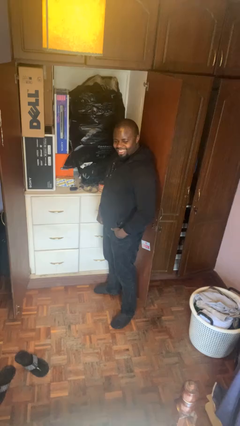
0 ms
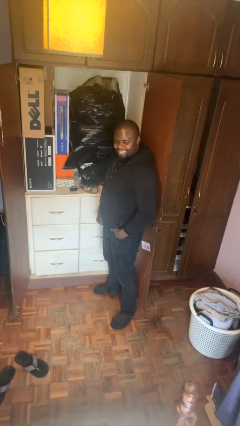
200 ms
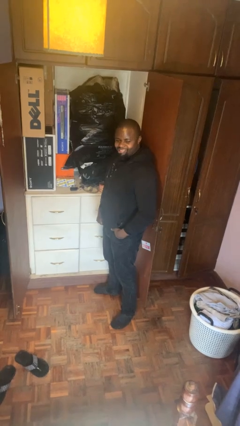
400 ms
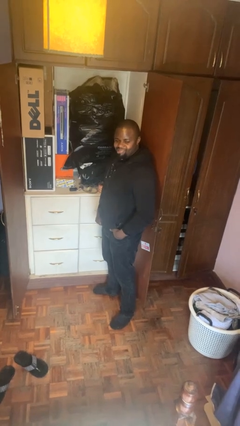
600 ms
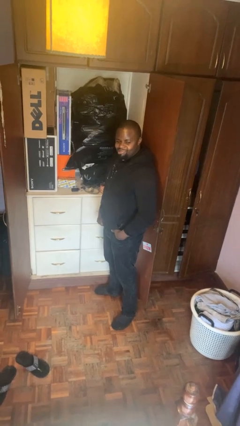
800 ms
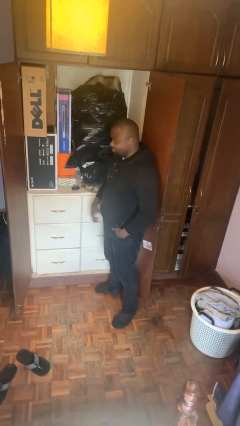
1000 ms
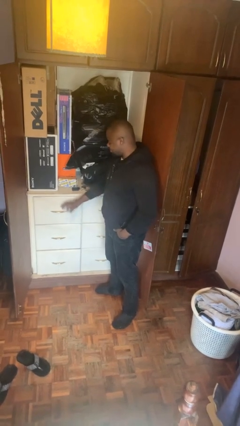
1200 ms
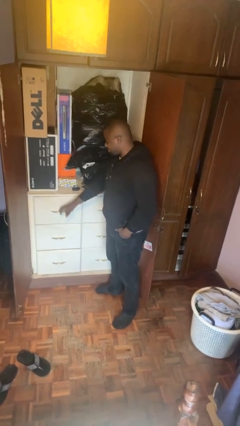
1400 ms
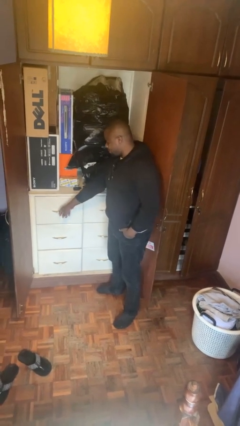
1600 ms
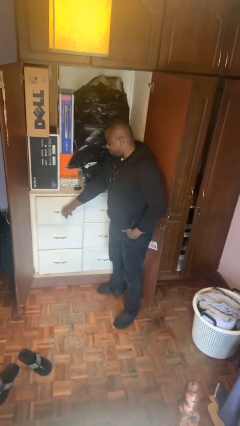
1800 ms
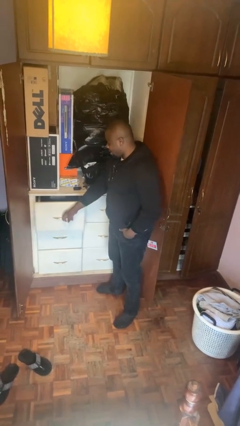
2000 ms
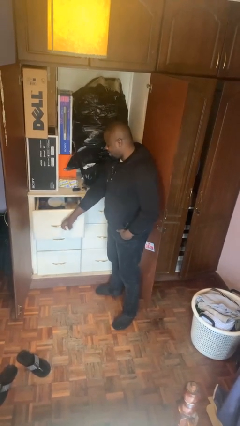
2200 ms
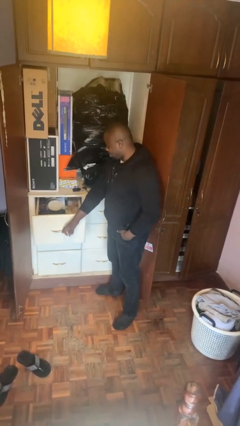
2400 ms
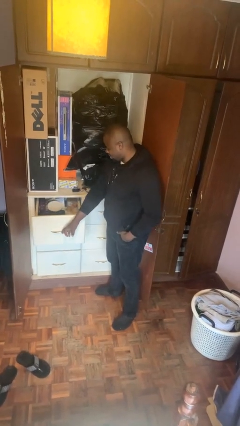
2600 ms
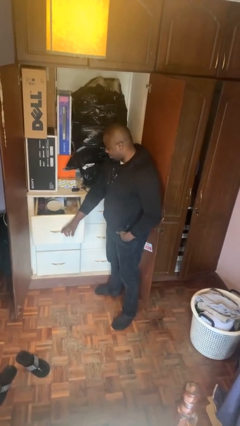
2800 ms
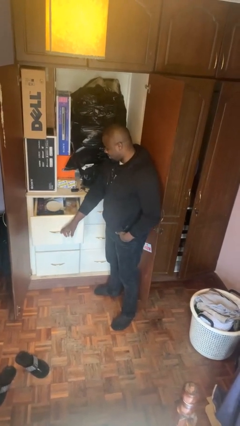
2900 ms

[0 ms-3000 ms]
person opens dresser drawer

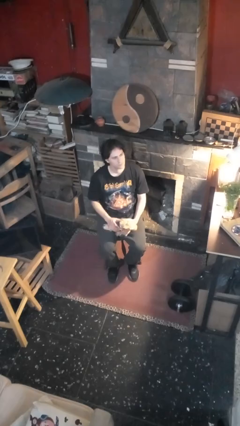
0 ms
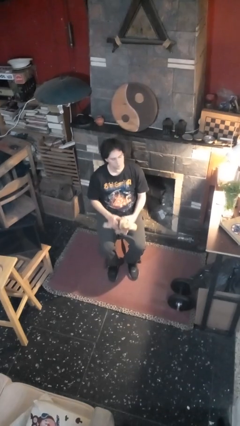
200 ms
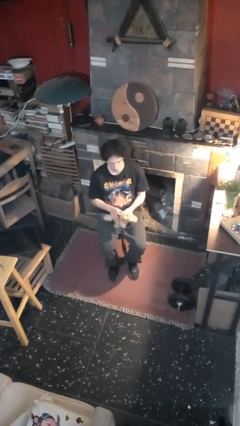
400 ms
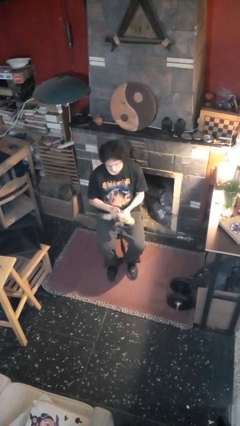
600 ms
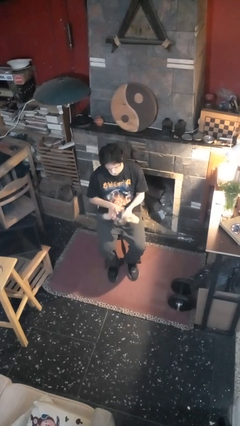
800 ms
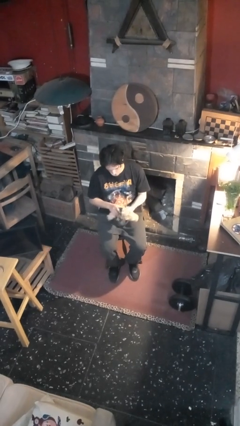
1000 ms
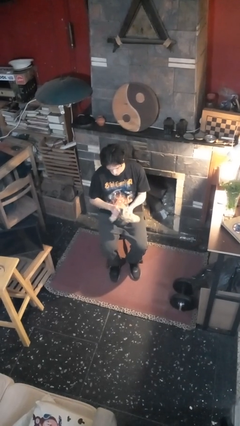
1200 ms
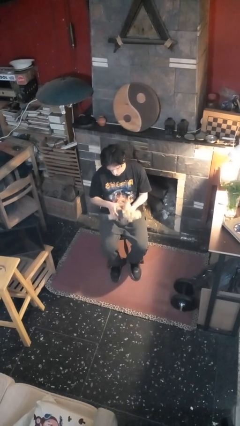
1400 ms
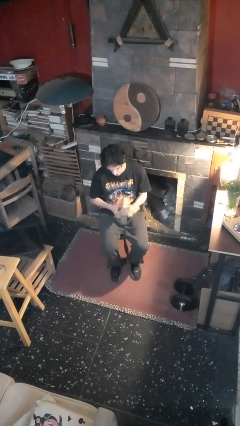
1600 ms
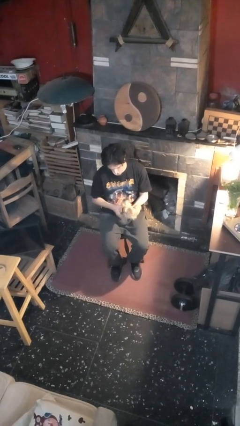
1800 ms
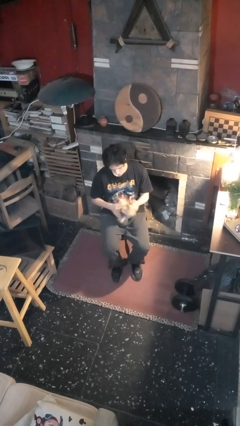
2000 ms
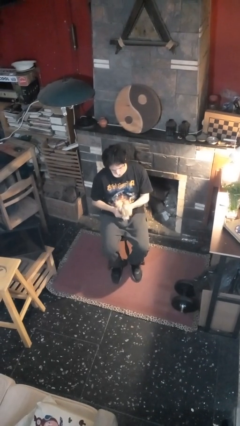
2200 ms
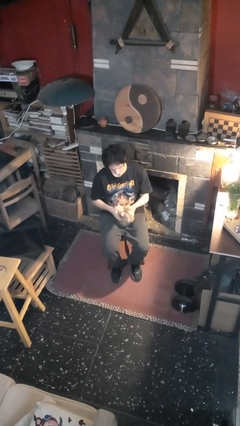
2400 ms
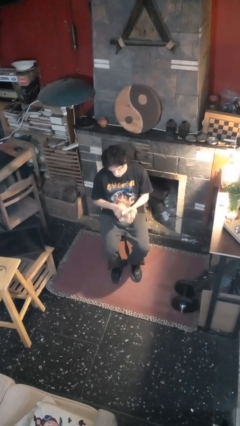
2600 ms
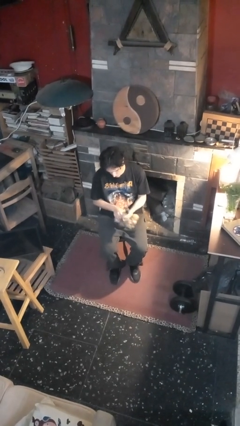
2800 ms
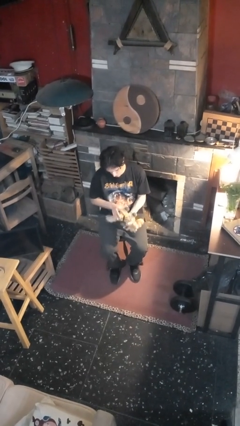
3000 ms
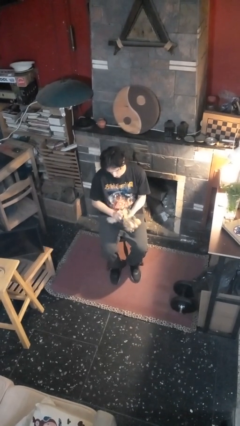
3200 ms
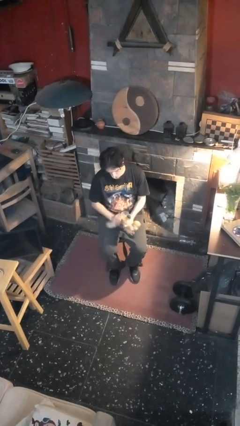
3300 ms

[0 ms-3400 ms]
person squeezes object

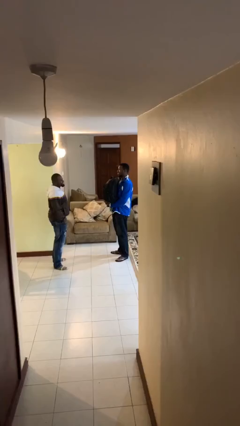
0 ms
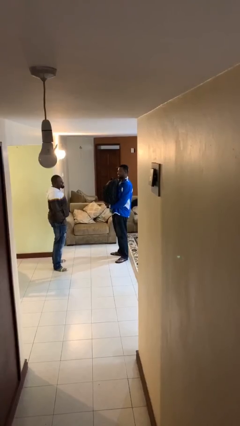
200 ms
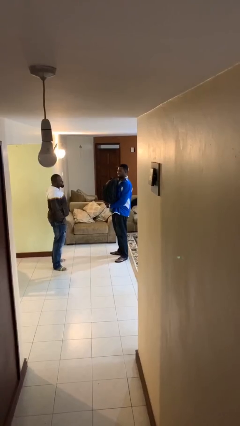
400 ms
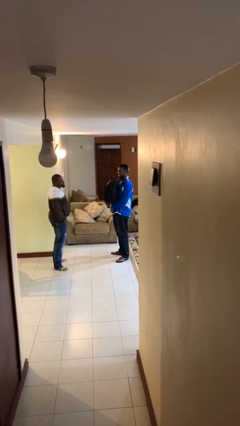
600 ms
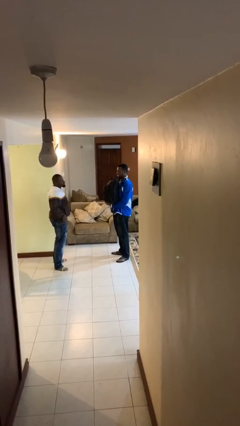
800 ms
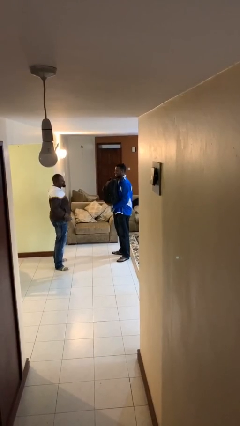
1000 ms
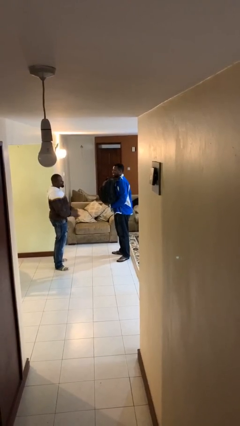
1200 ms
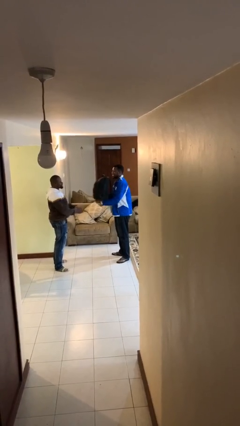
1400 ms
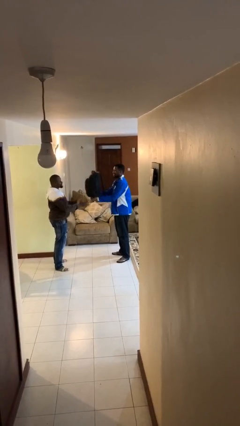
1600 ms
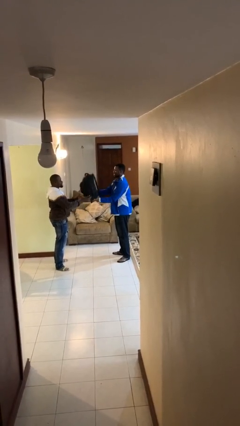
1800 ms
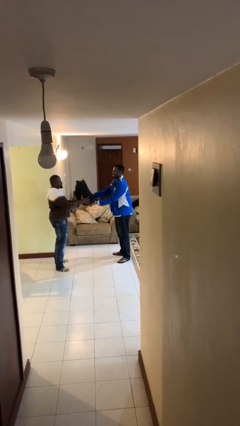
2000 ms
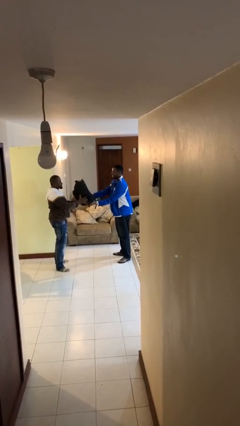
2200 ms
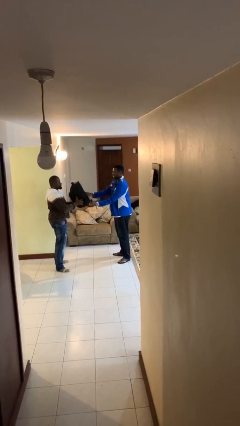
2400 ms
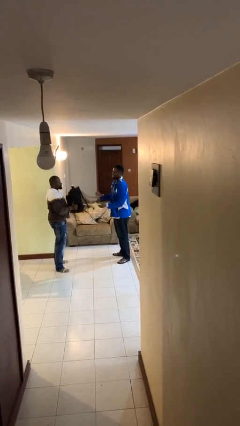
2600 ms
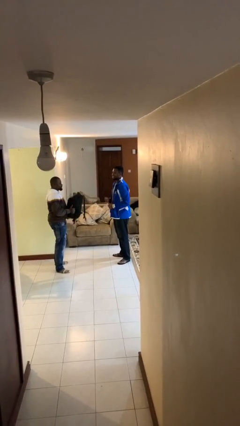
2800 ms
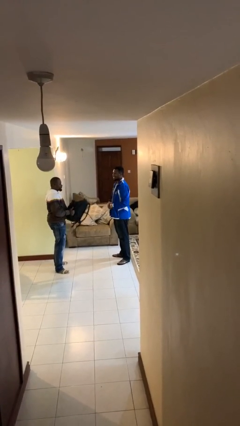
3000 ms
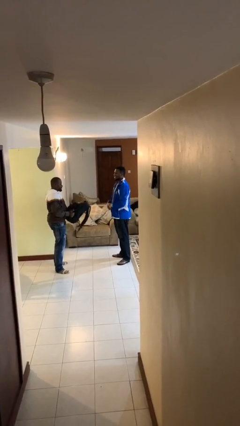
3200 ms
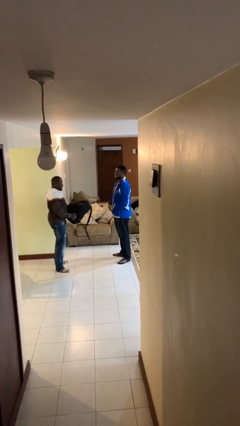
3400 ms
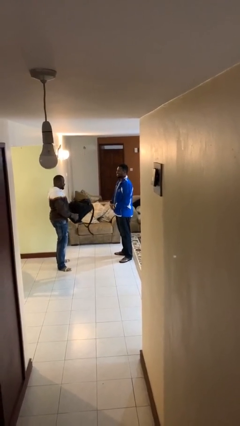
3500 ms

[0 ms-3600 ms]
person transfers object to person

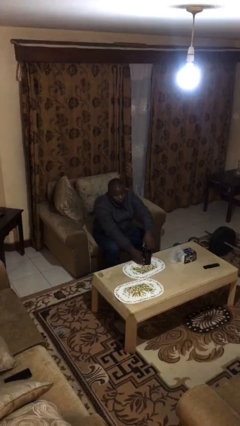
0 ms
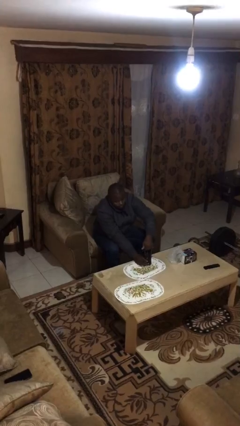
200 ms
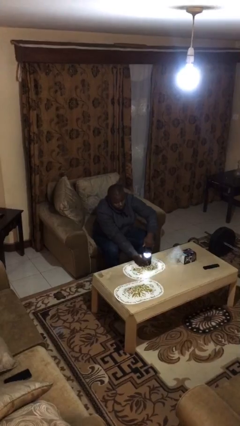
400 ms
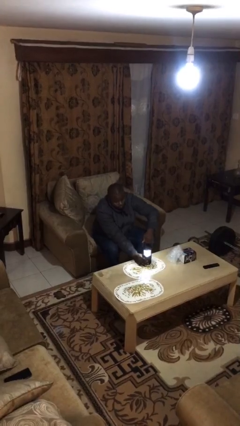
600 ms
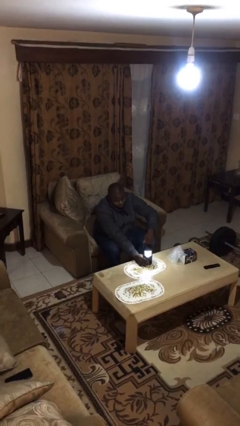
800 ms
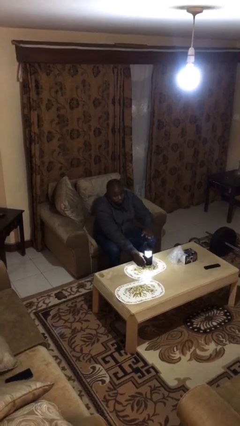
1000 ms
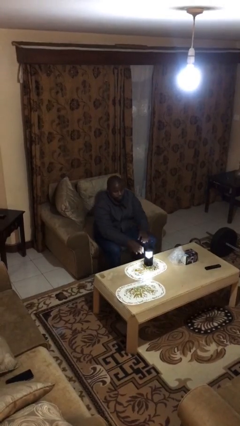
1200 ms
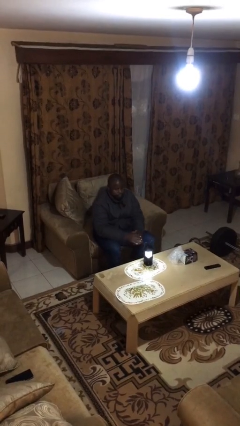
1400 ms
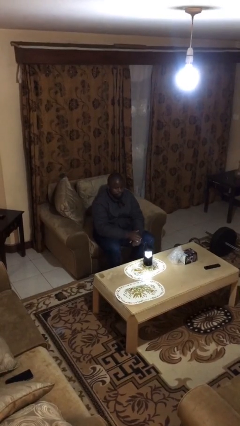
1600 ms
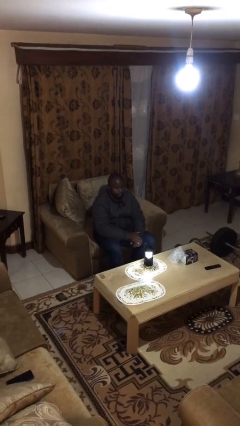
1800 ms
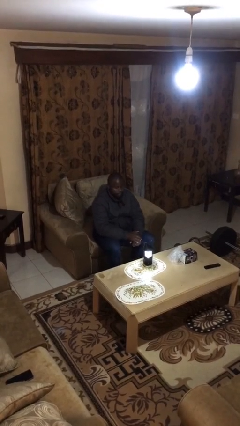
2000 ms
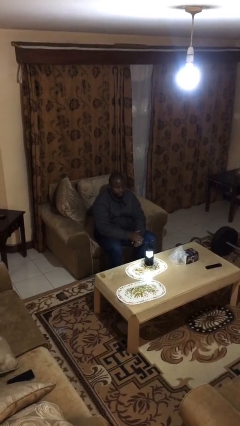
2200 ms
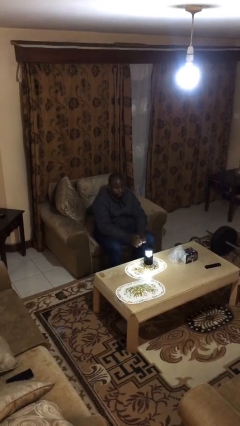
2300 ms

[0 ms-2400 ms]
person turns on lamp

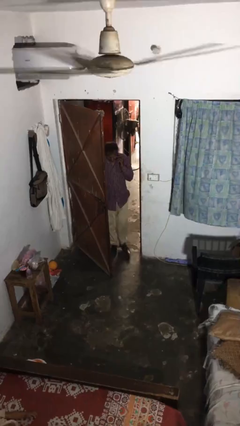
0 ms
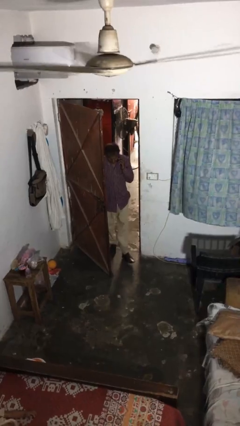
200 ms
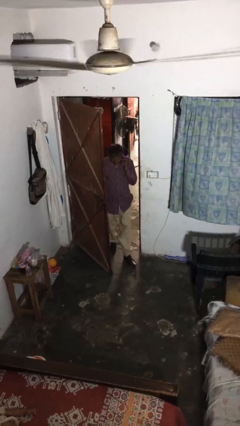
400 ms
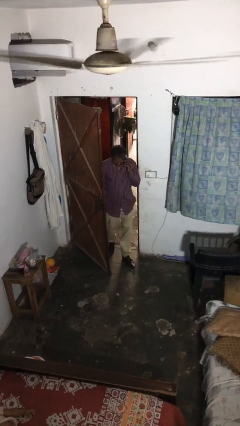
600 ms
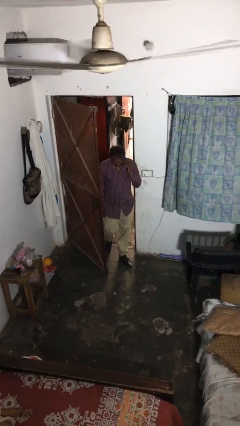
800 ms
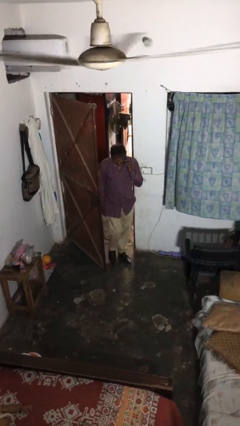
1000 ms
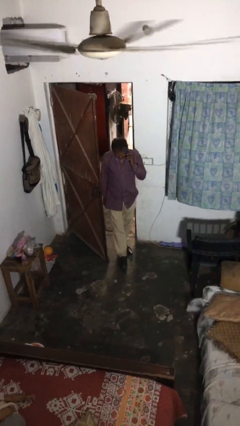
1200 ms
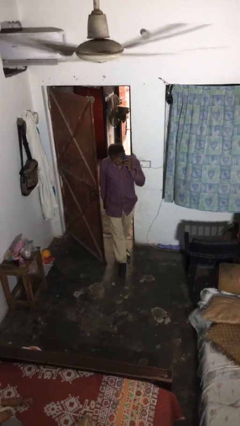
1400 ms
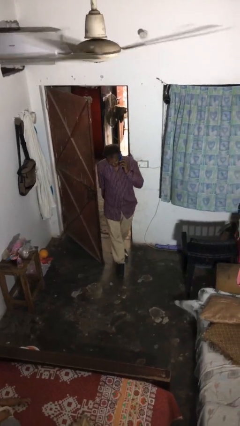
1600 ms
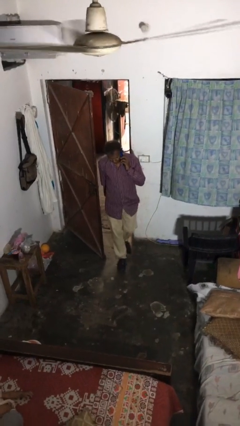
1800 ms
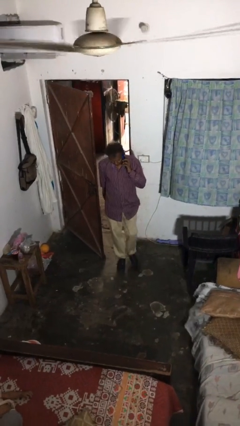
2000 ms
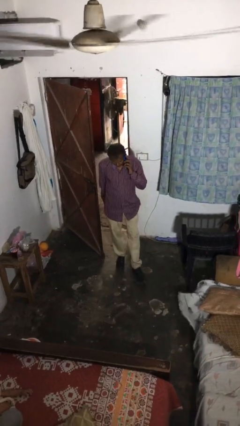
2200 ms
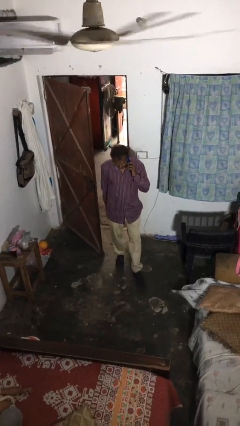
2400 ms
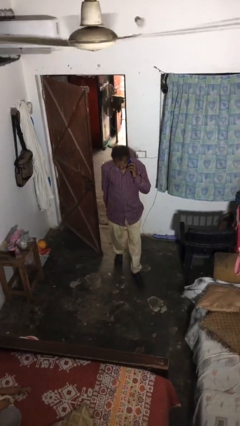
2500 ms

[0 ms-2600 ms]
person enters scene through structure

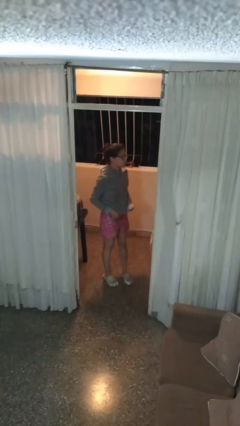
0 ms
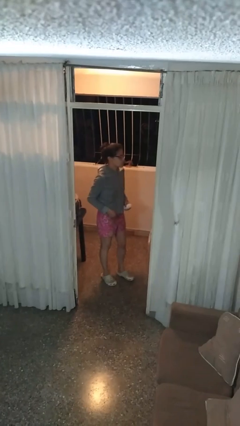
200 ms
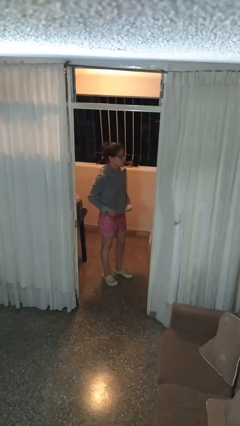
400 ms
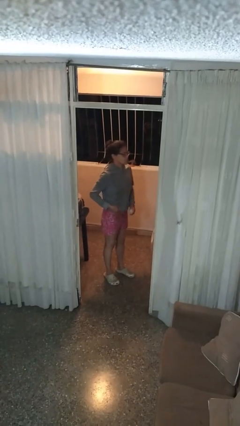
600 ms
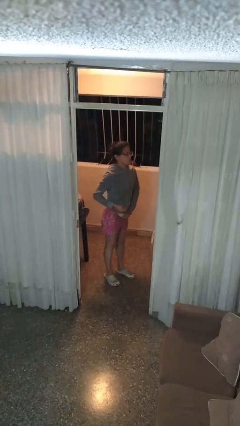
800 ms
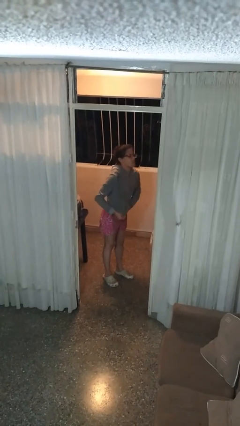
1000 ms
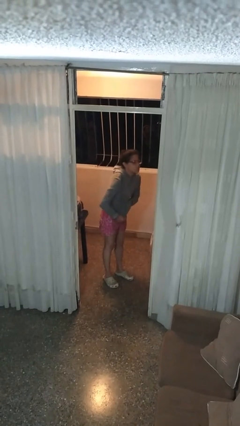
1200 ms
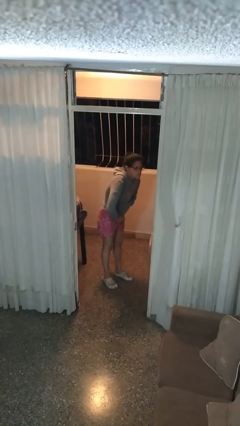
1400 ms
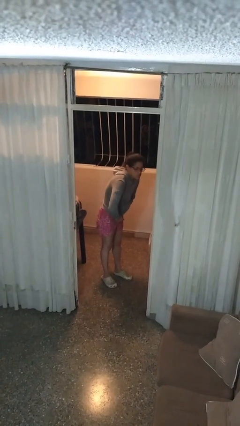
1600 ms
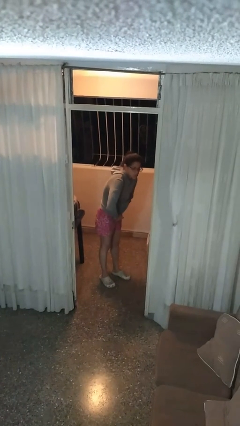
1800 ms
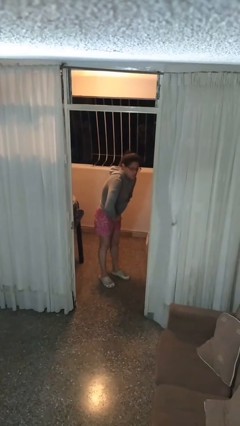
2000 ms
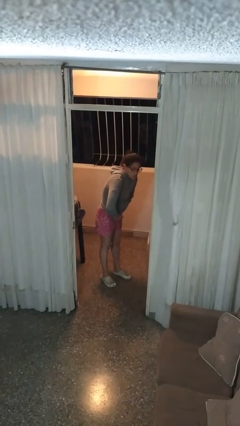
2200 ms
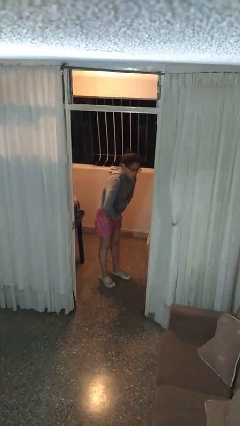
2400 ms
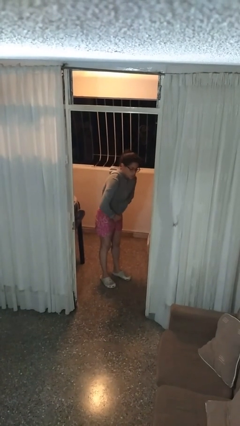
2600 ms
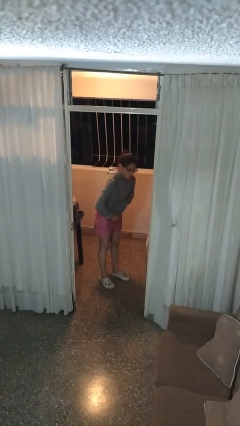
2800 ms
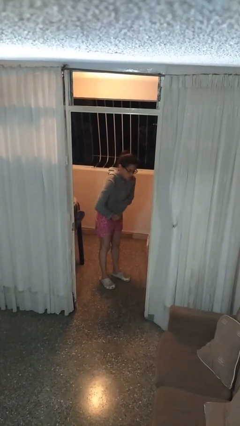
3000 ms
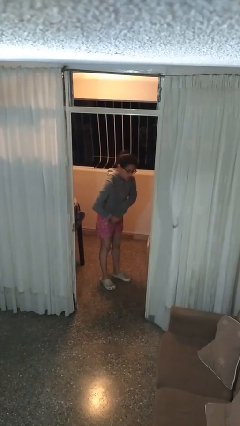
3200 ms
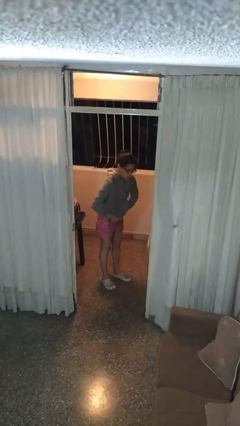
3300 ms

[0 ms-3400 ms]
person applies deodorant
